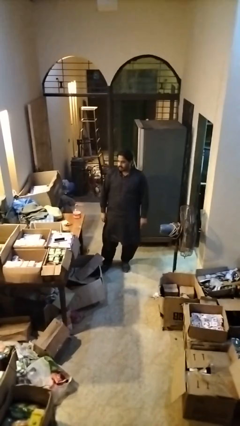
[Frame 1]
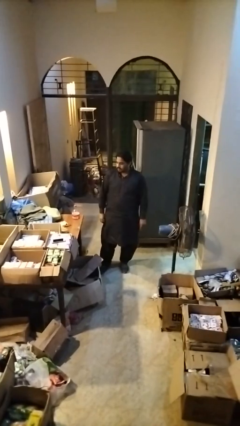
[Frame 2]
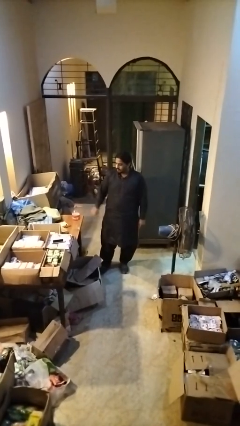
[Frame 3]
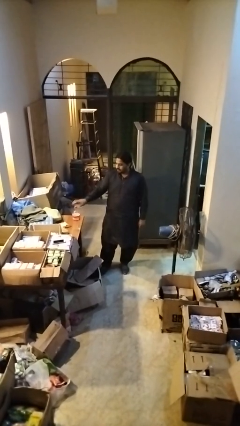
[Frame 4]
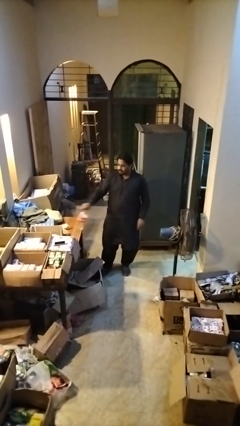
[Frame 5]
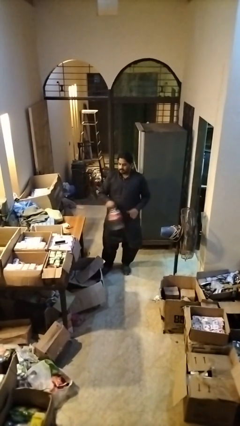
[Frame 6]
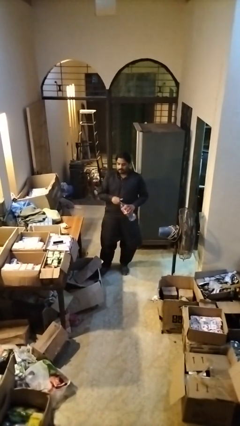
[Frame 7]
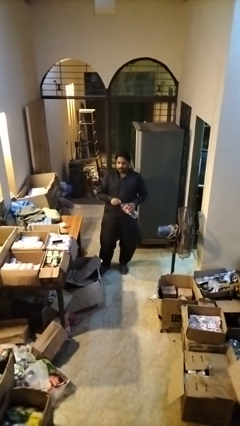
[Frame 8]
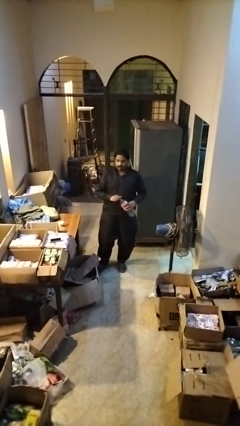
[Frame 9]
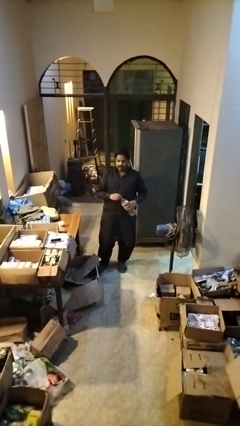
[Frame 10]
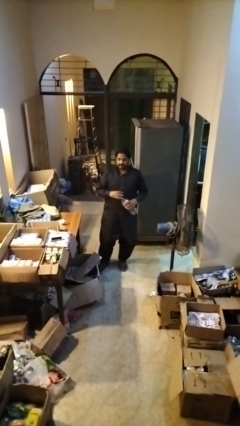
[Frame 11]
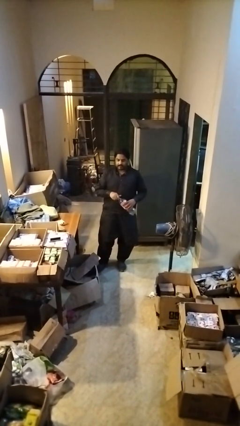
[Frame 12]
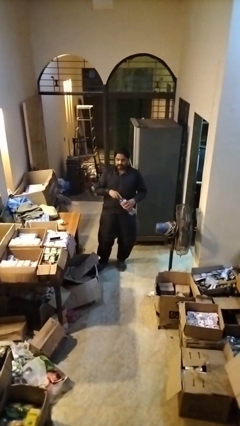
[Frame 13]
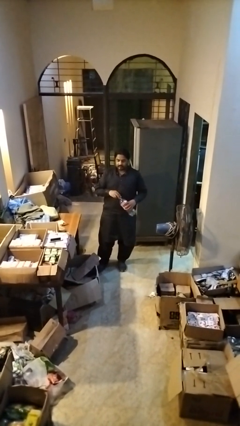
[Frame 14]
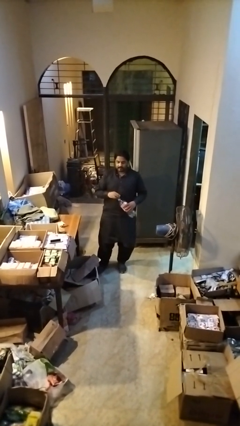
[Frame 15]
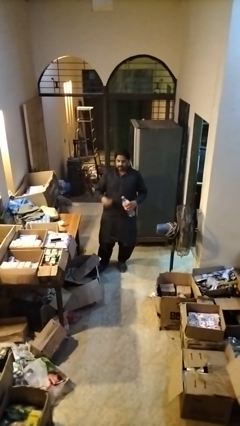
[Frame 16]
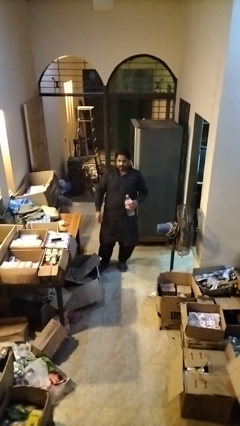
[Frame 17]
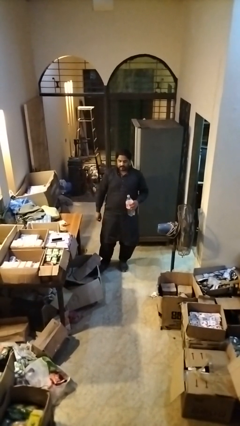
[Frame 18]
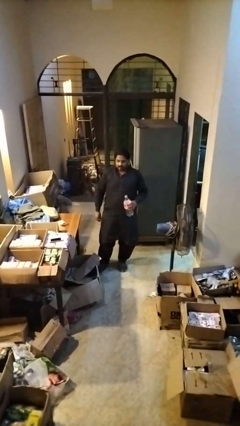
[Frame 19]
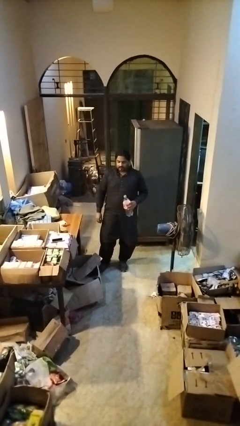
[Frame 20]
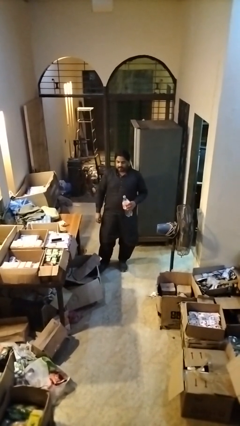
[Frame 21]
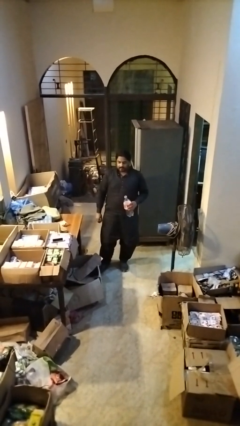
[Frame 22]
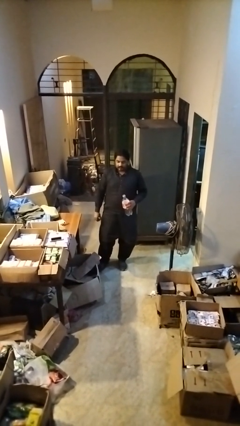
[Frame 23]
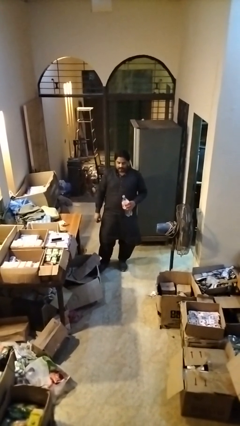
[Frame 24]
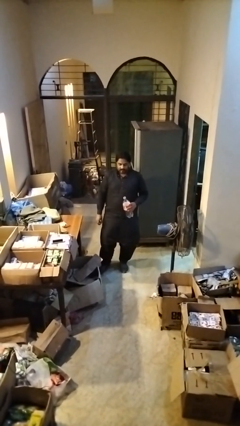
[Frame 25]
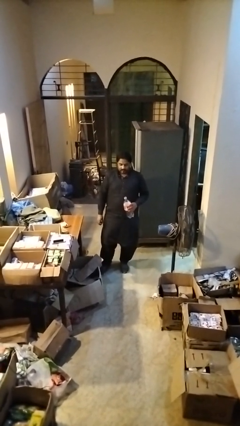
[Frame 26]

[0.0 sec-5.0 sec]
person unscrews lid from bottle

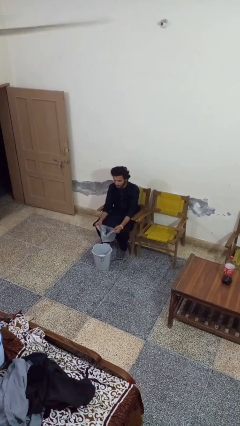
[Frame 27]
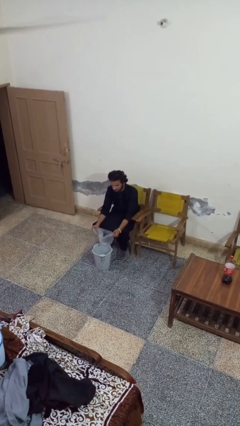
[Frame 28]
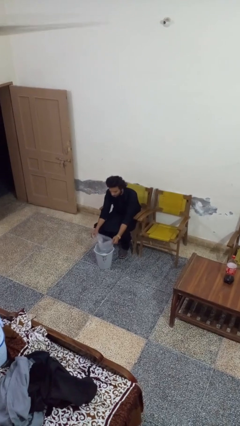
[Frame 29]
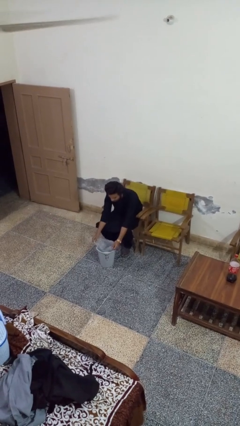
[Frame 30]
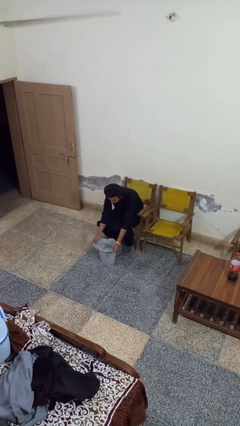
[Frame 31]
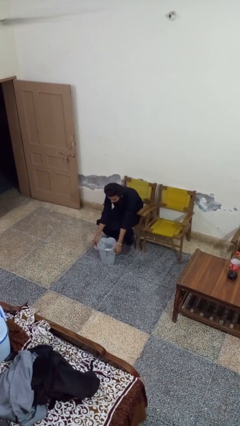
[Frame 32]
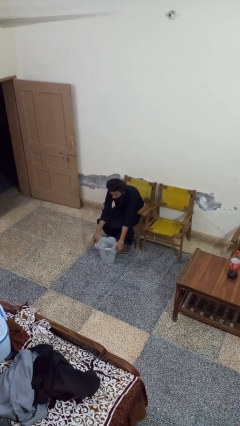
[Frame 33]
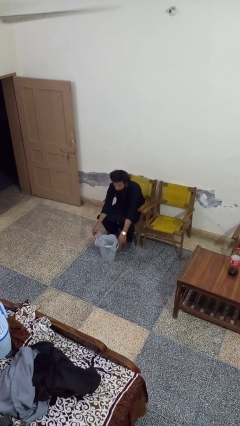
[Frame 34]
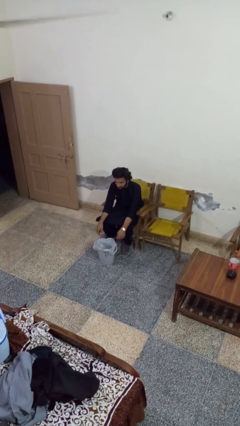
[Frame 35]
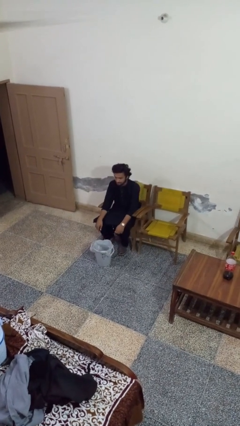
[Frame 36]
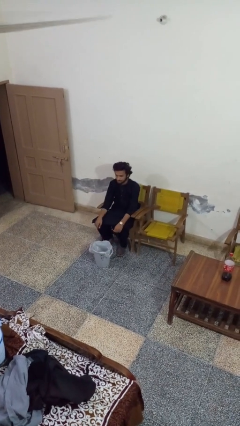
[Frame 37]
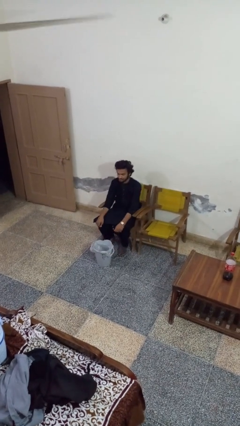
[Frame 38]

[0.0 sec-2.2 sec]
person inserts trashbag into trashcan

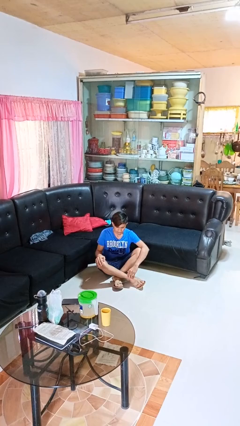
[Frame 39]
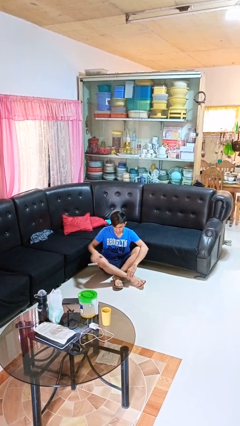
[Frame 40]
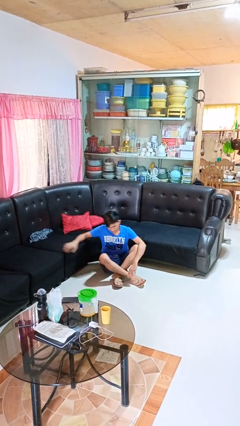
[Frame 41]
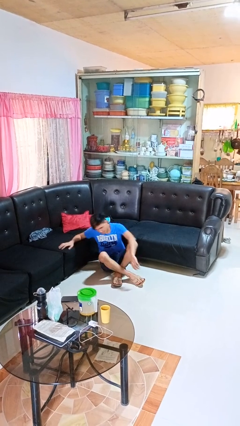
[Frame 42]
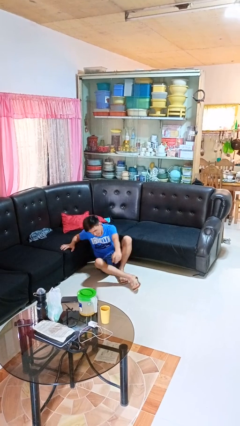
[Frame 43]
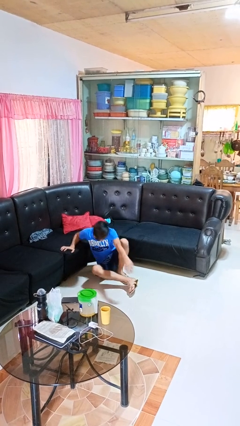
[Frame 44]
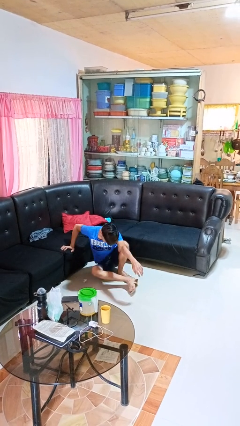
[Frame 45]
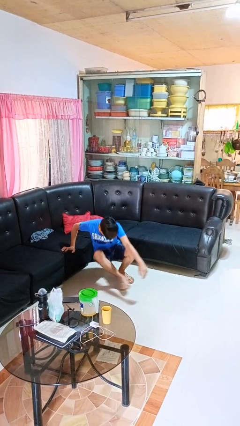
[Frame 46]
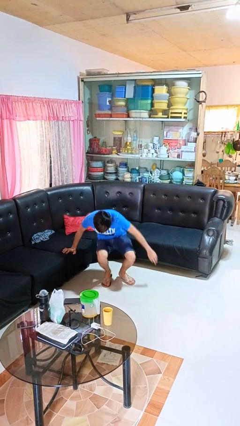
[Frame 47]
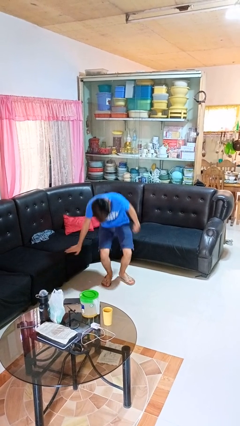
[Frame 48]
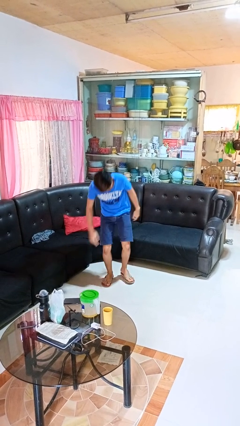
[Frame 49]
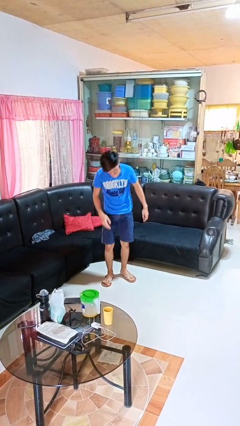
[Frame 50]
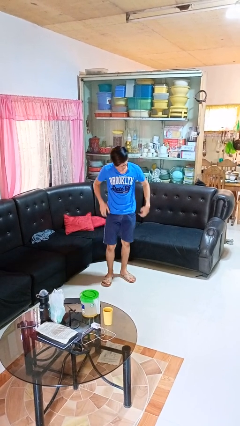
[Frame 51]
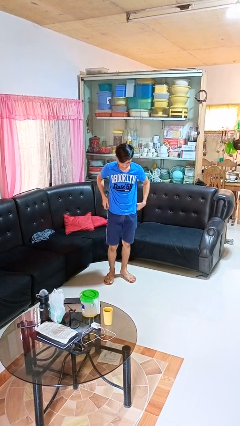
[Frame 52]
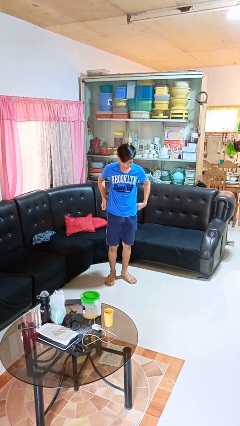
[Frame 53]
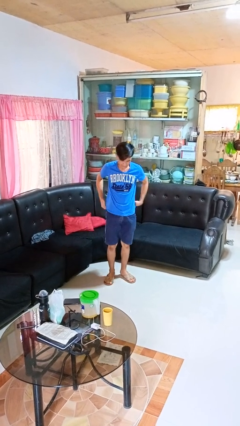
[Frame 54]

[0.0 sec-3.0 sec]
person stands up from floor

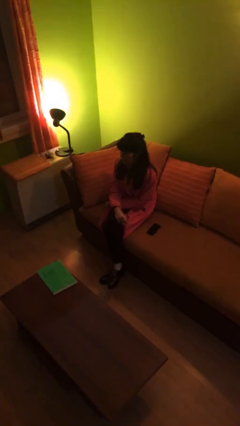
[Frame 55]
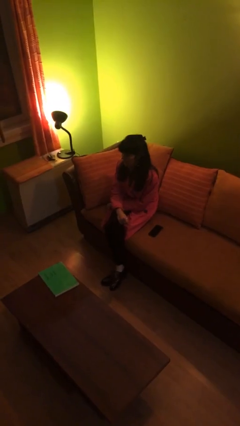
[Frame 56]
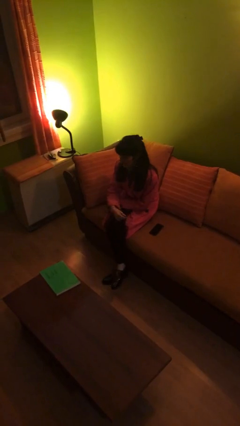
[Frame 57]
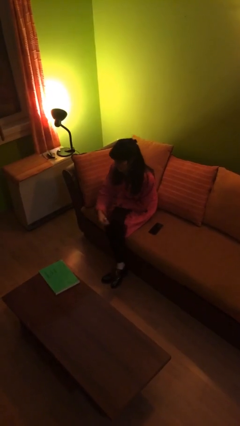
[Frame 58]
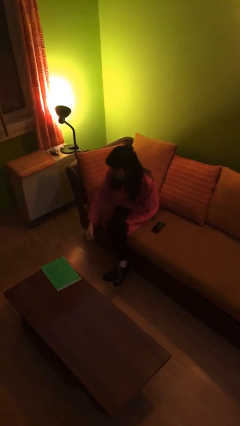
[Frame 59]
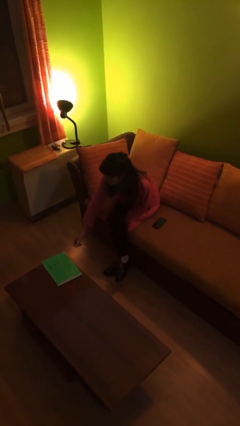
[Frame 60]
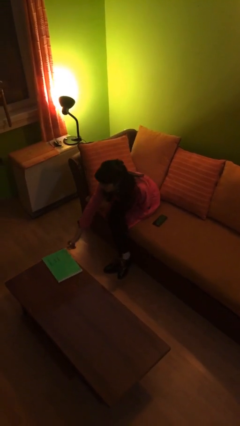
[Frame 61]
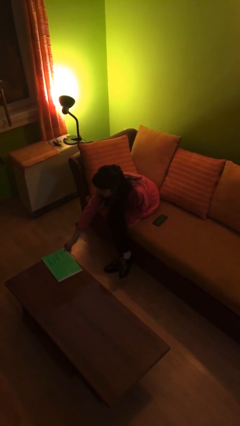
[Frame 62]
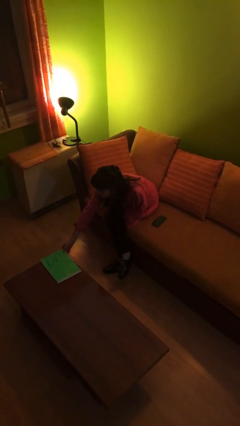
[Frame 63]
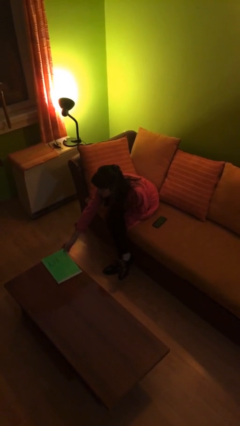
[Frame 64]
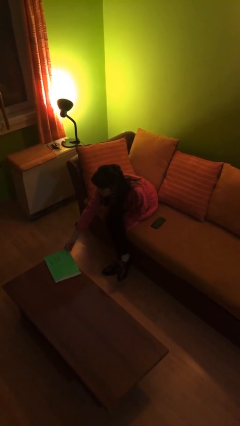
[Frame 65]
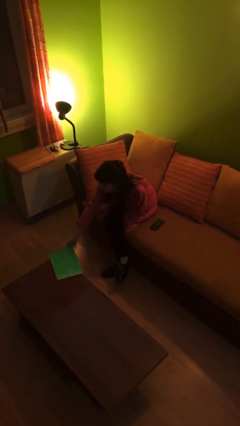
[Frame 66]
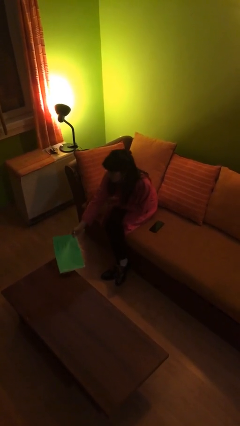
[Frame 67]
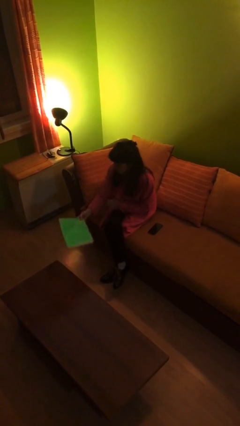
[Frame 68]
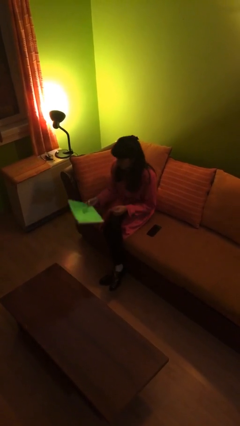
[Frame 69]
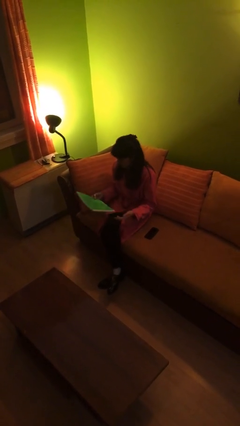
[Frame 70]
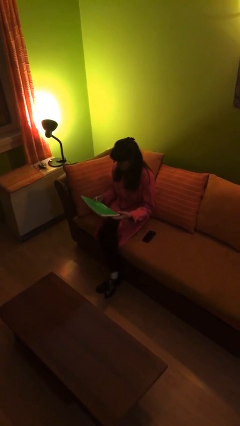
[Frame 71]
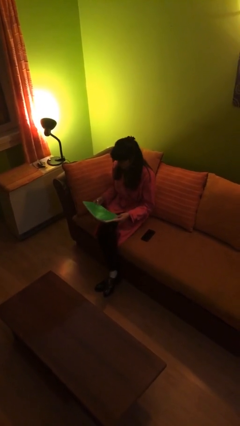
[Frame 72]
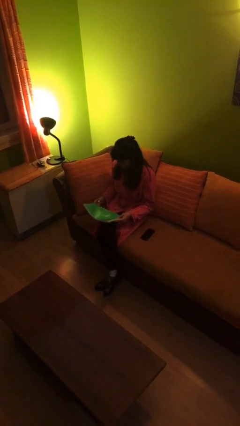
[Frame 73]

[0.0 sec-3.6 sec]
person picks up object from table

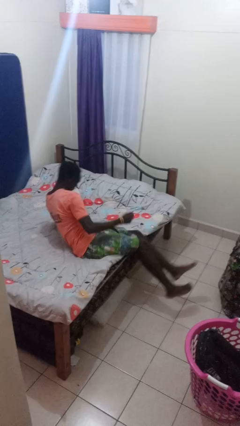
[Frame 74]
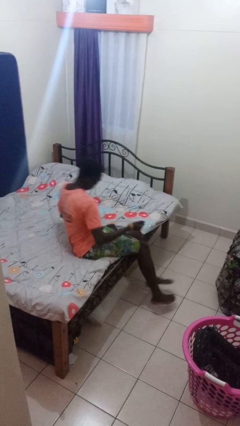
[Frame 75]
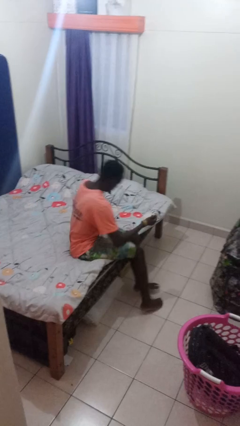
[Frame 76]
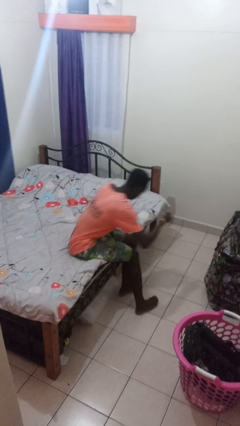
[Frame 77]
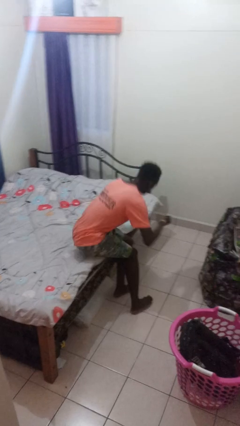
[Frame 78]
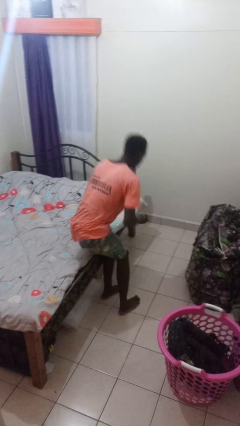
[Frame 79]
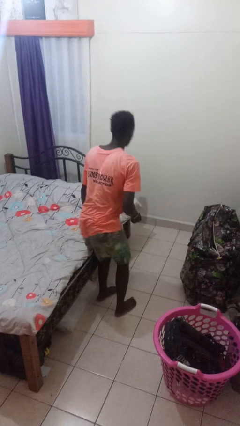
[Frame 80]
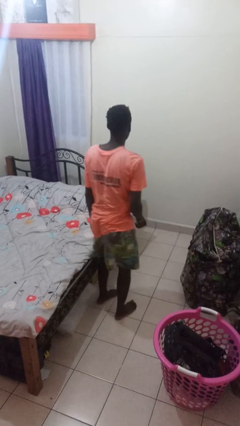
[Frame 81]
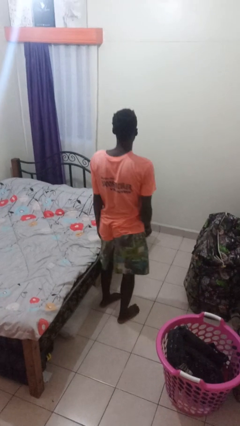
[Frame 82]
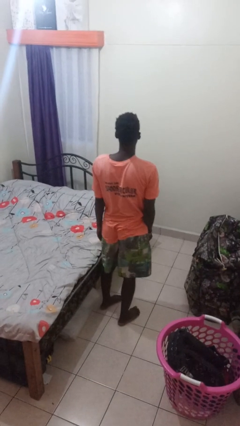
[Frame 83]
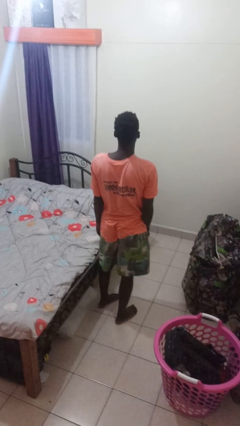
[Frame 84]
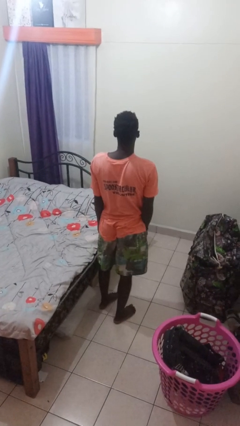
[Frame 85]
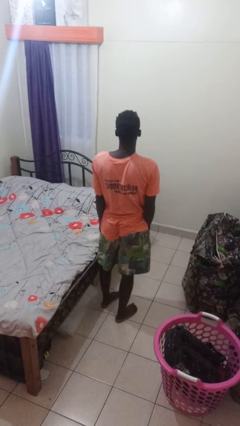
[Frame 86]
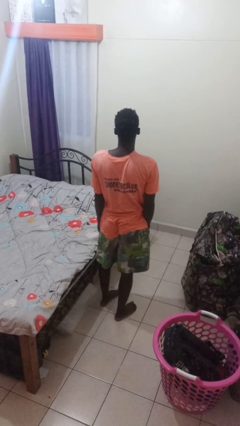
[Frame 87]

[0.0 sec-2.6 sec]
person stands up

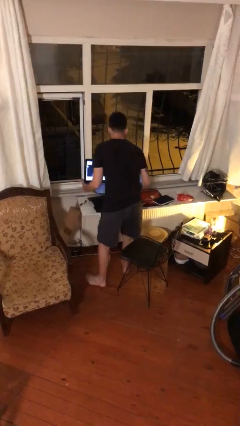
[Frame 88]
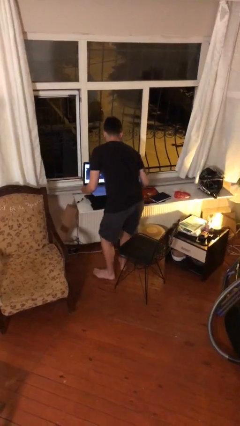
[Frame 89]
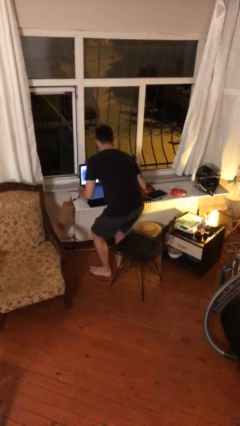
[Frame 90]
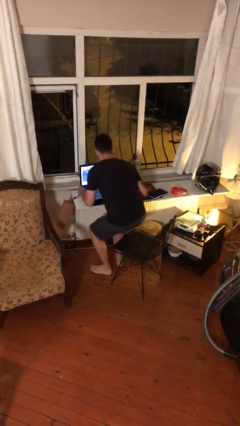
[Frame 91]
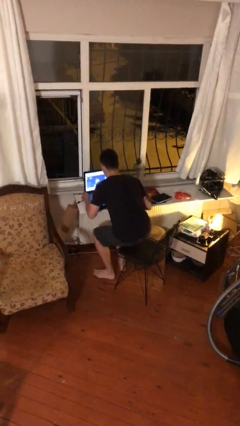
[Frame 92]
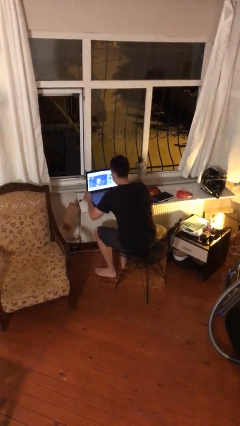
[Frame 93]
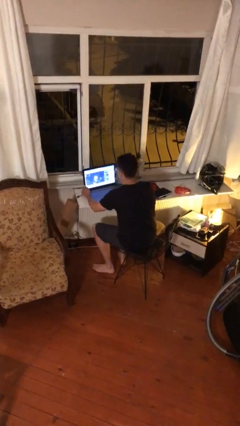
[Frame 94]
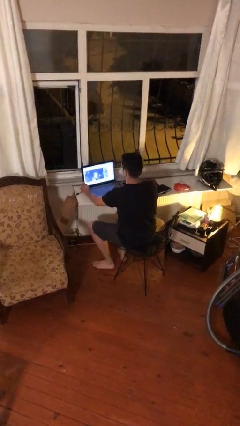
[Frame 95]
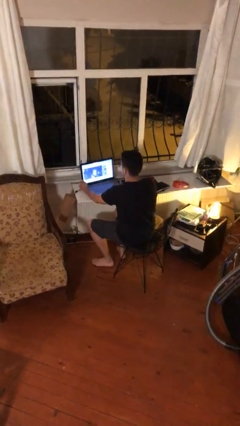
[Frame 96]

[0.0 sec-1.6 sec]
person sits down
